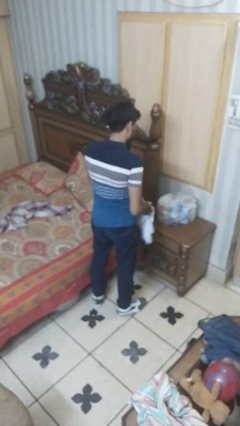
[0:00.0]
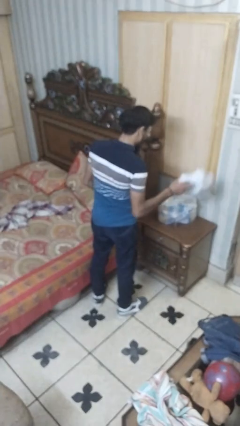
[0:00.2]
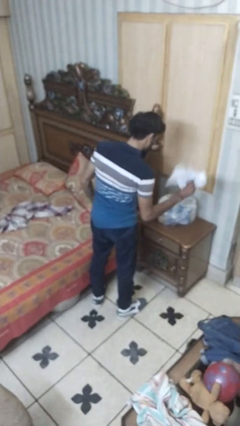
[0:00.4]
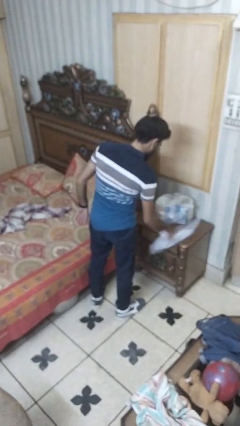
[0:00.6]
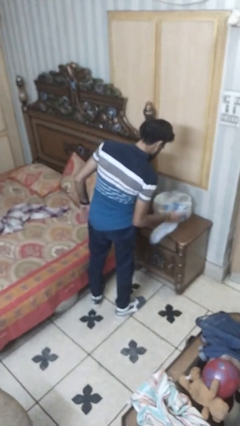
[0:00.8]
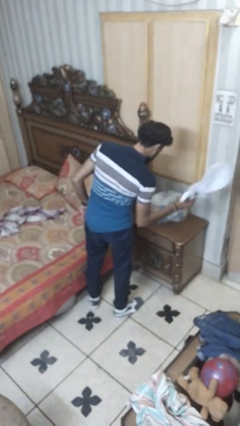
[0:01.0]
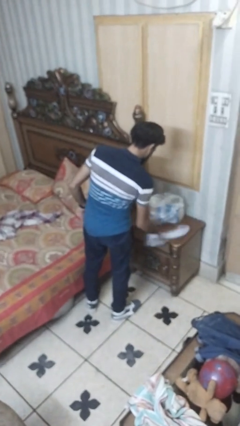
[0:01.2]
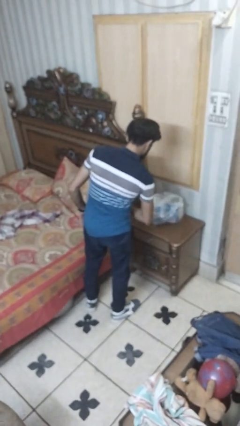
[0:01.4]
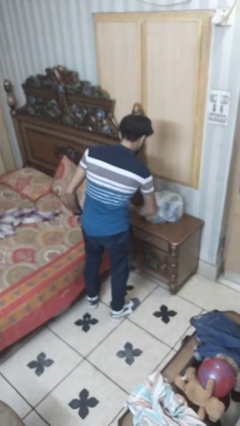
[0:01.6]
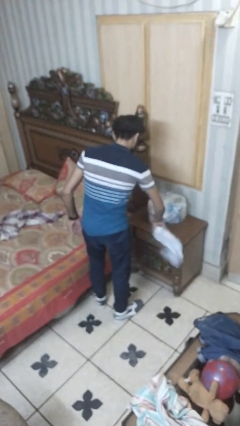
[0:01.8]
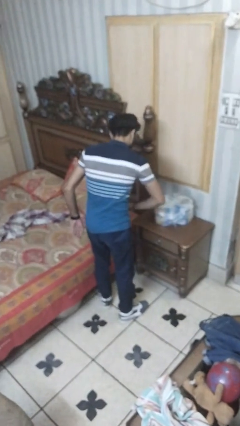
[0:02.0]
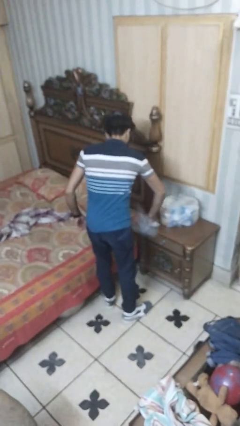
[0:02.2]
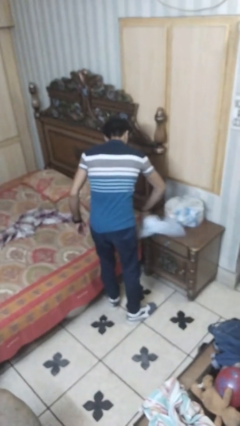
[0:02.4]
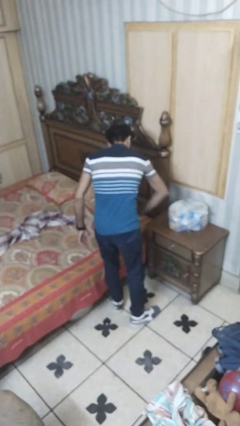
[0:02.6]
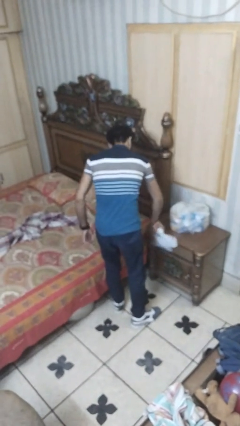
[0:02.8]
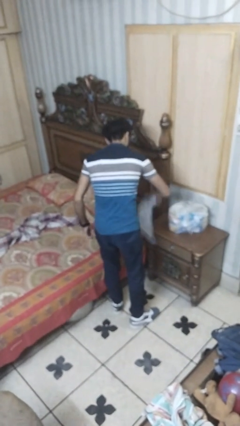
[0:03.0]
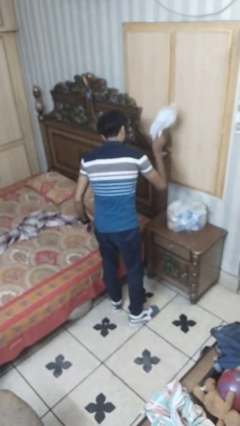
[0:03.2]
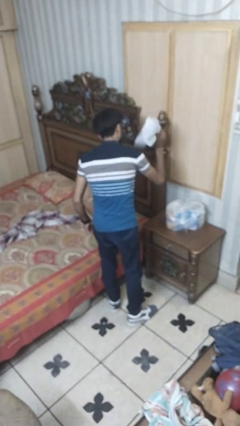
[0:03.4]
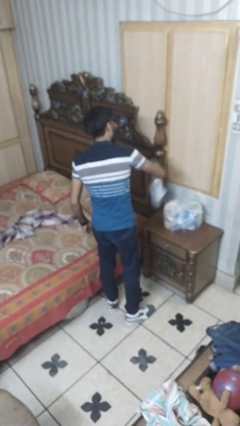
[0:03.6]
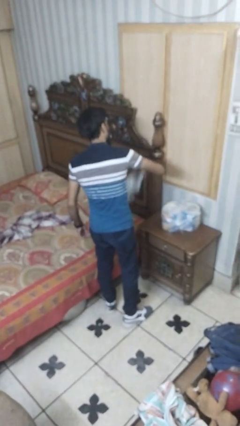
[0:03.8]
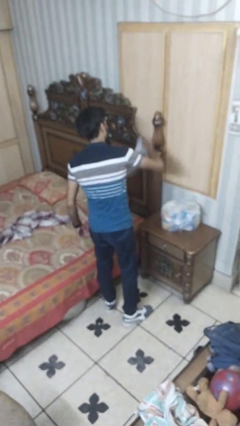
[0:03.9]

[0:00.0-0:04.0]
person dusts furniture

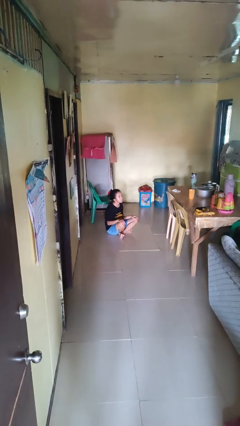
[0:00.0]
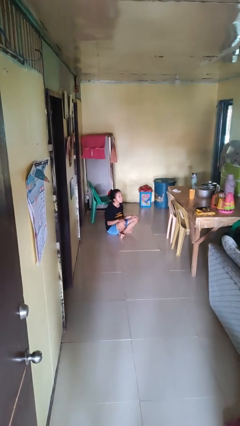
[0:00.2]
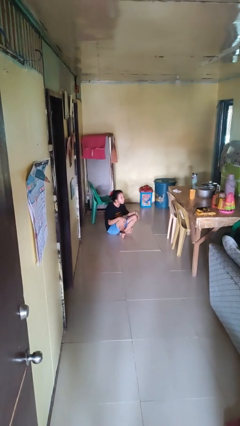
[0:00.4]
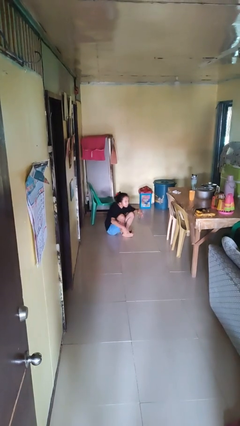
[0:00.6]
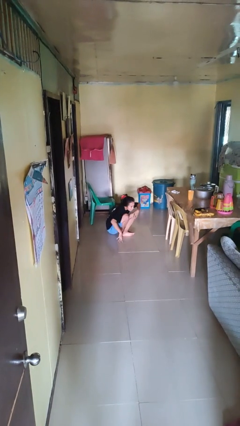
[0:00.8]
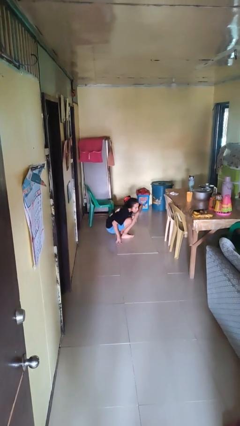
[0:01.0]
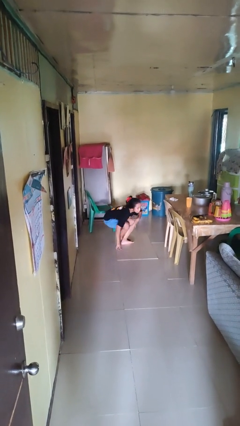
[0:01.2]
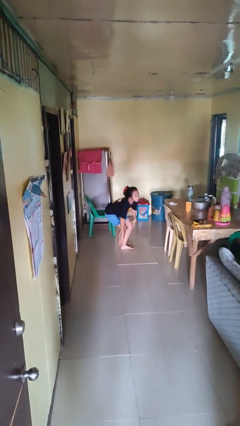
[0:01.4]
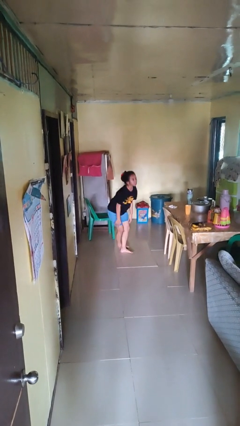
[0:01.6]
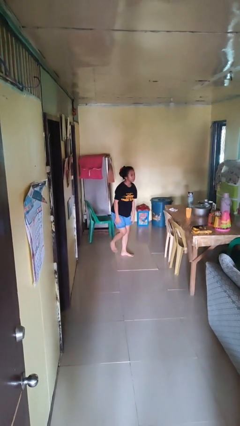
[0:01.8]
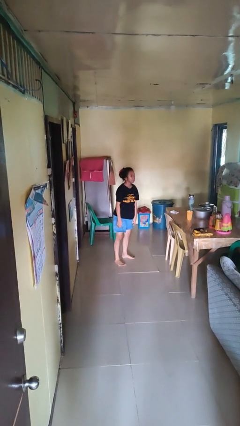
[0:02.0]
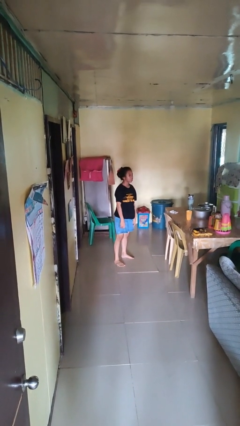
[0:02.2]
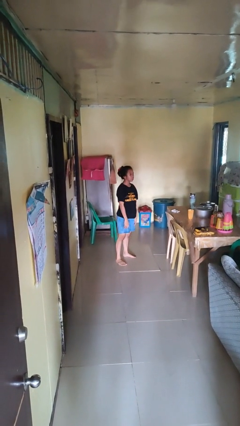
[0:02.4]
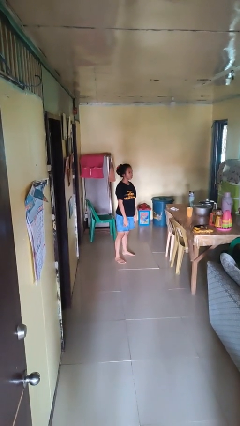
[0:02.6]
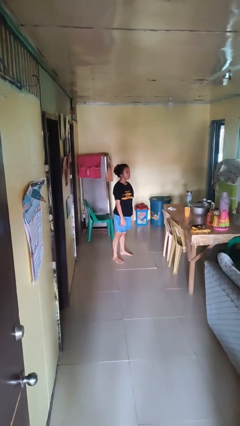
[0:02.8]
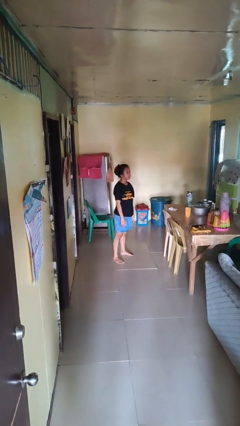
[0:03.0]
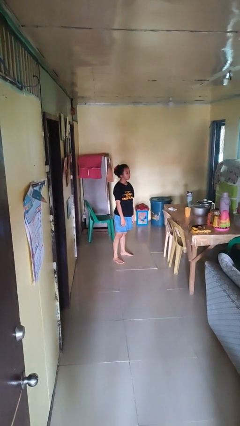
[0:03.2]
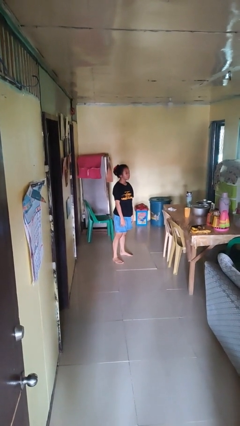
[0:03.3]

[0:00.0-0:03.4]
person stands up from floor

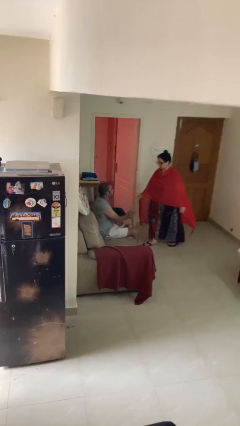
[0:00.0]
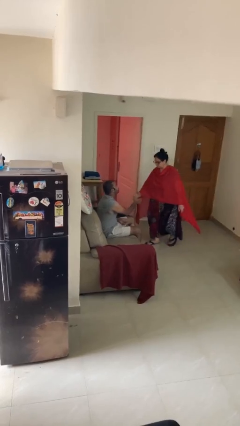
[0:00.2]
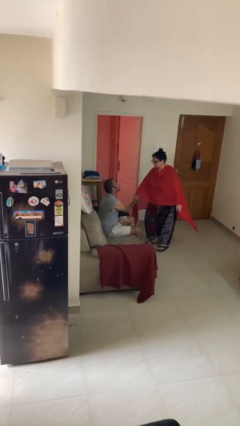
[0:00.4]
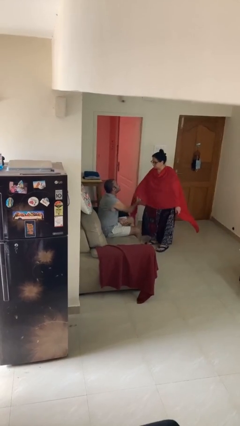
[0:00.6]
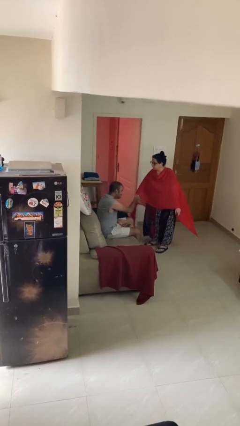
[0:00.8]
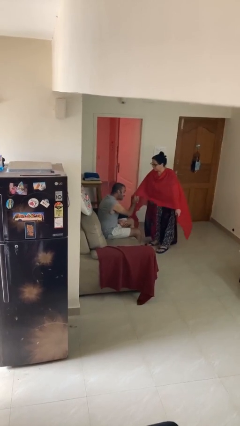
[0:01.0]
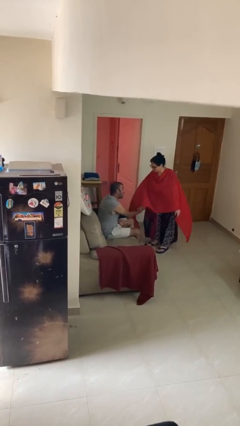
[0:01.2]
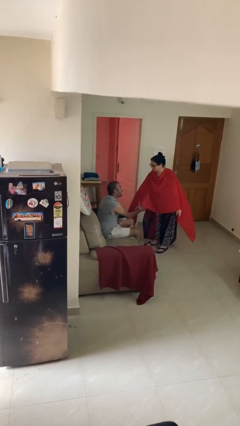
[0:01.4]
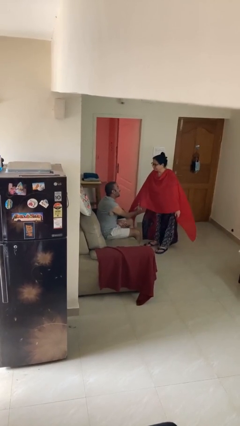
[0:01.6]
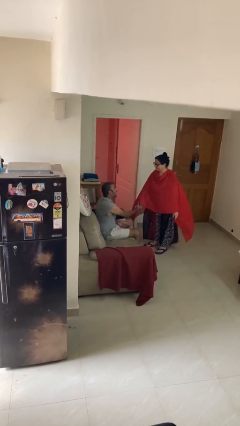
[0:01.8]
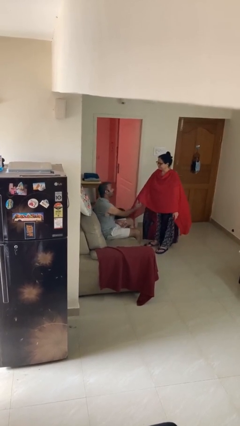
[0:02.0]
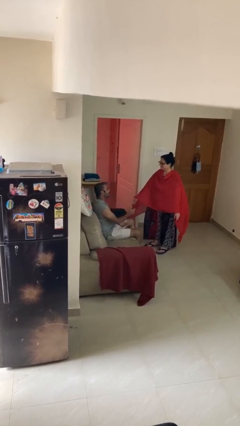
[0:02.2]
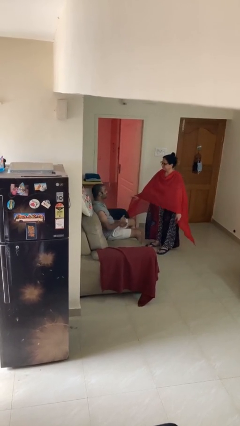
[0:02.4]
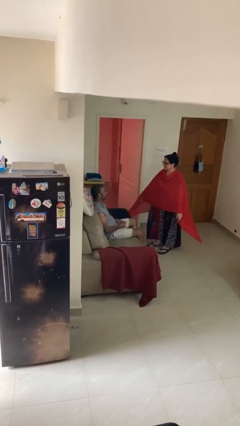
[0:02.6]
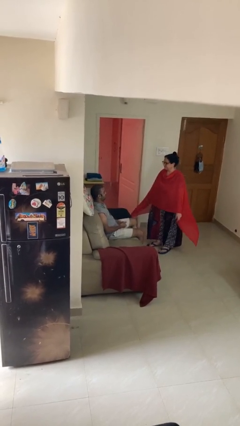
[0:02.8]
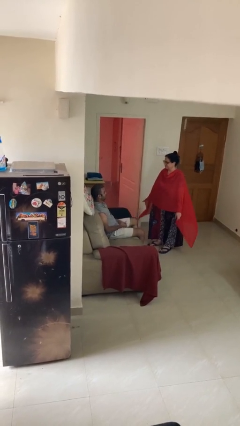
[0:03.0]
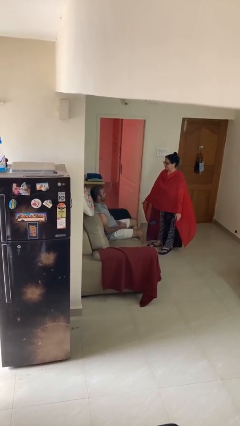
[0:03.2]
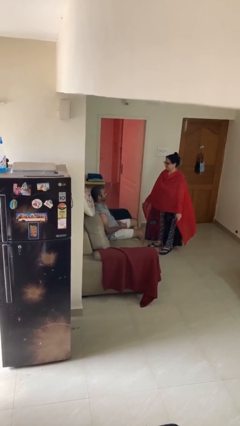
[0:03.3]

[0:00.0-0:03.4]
person shakes hand

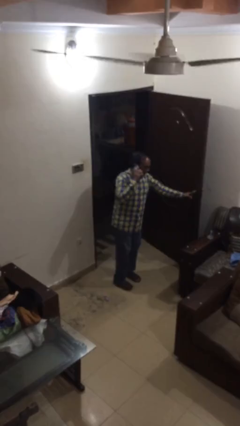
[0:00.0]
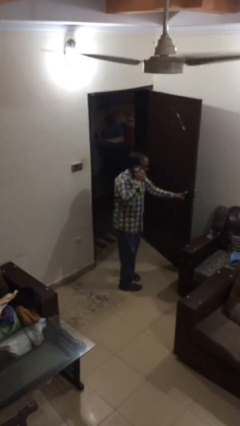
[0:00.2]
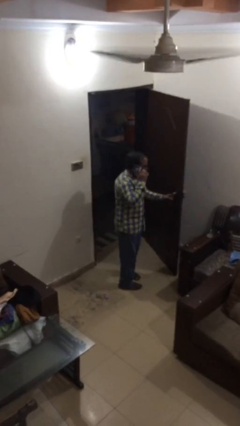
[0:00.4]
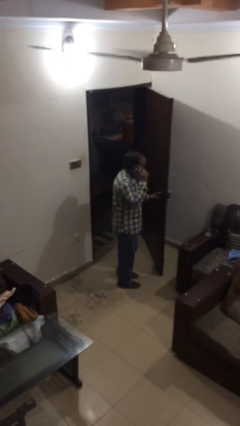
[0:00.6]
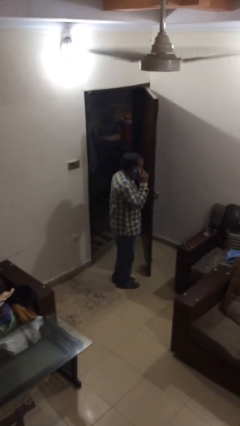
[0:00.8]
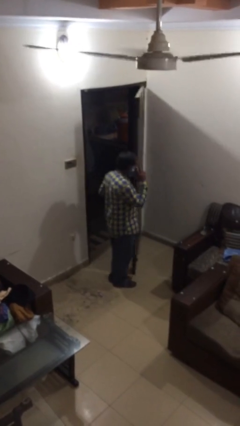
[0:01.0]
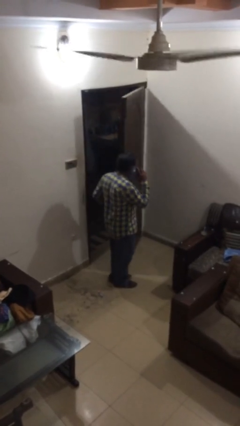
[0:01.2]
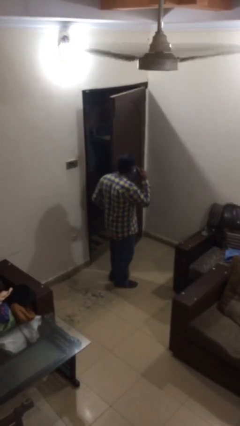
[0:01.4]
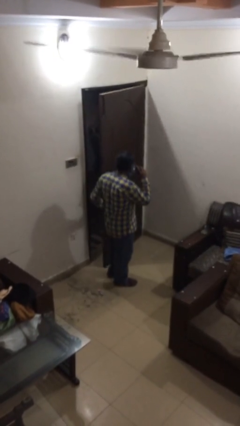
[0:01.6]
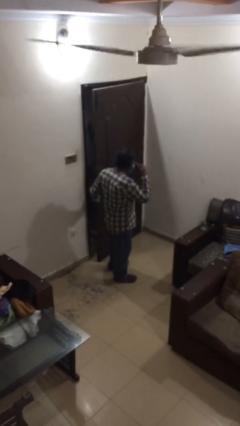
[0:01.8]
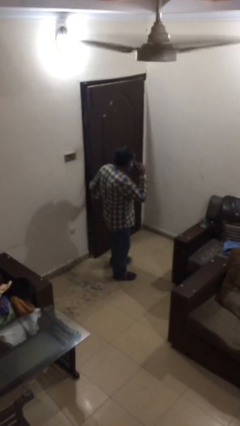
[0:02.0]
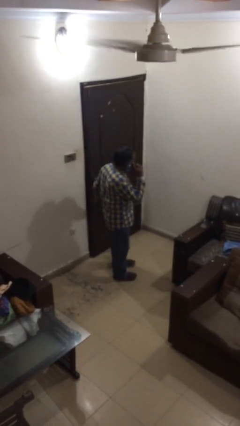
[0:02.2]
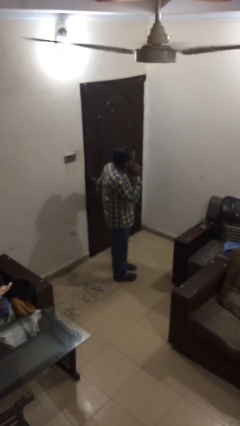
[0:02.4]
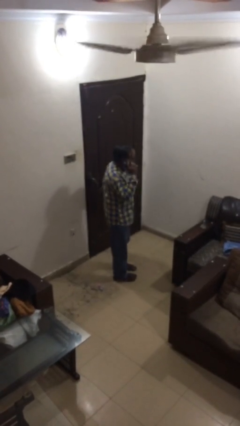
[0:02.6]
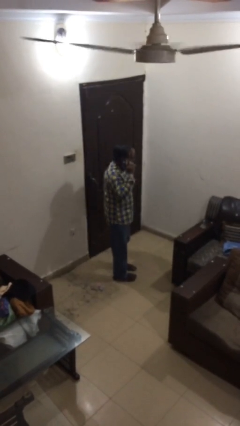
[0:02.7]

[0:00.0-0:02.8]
person closes facility door

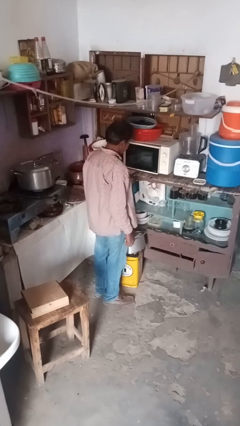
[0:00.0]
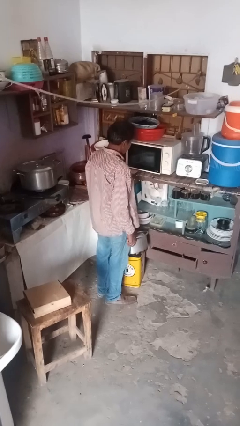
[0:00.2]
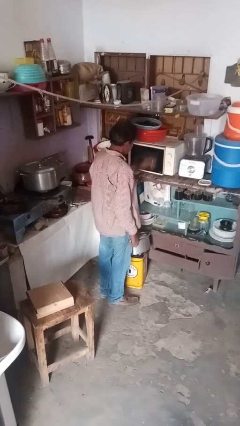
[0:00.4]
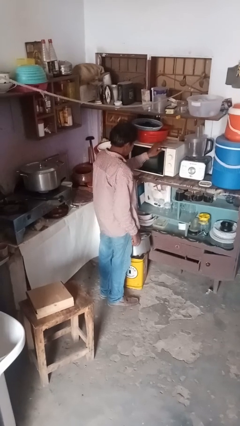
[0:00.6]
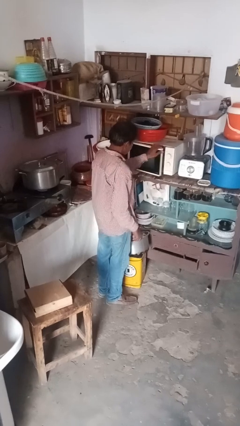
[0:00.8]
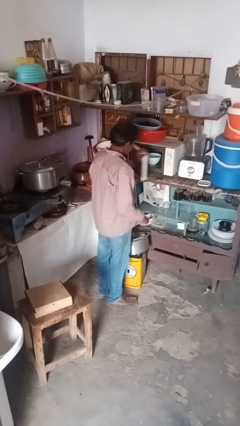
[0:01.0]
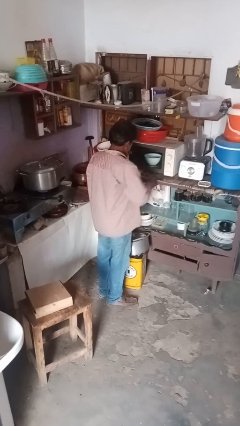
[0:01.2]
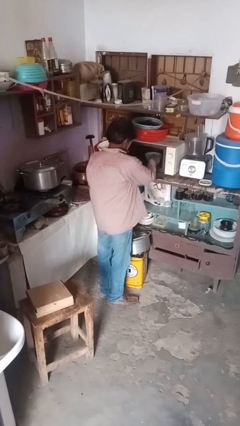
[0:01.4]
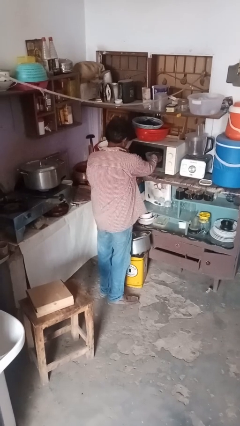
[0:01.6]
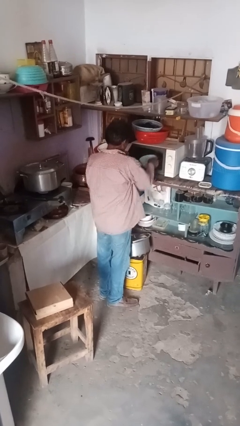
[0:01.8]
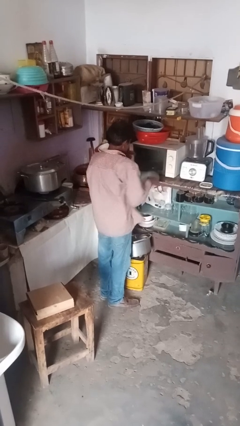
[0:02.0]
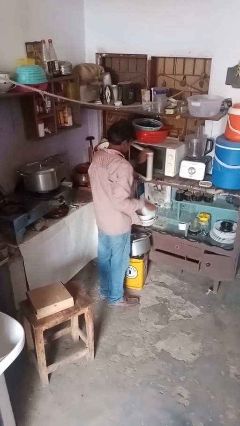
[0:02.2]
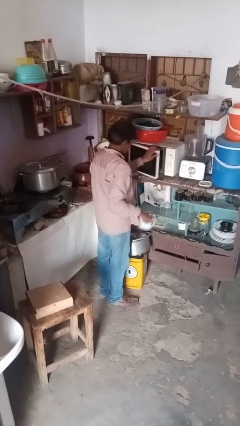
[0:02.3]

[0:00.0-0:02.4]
person takes object from microwave

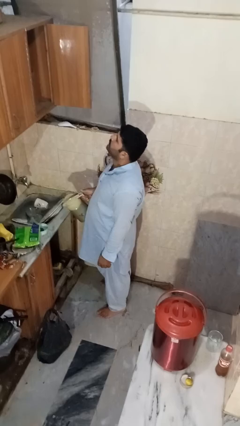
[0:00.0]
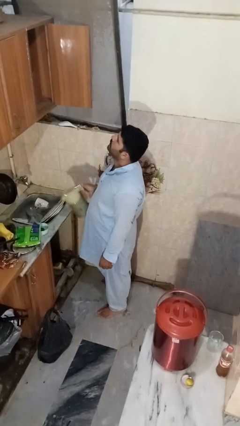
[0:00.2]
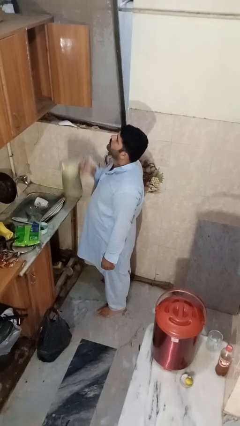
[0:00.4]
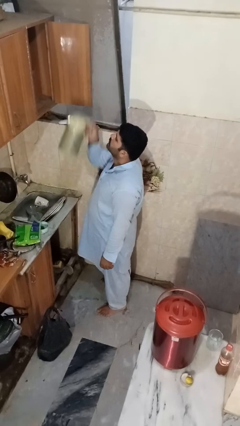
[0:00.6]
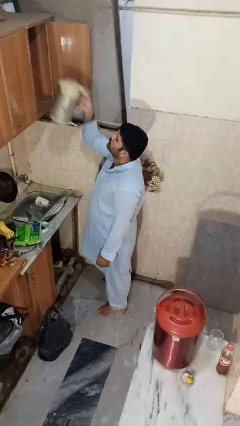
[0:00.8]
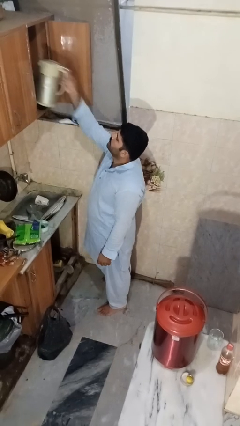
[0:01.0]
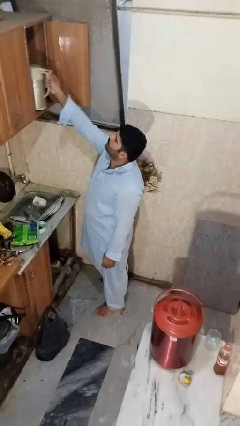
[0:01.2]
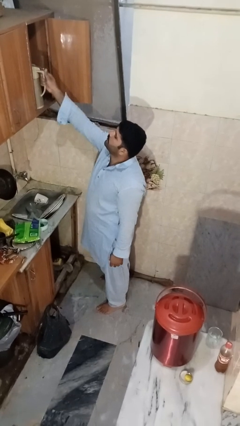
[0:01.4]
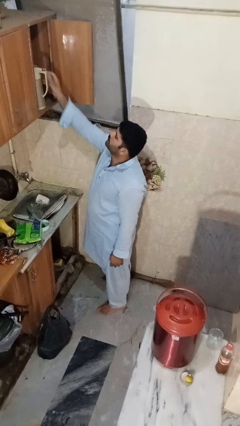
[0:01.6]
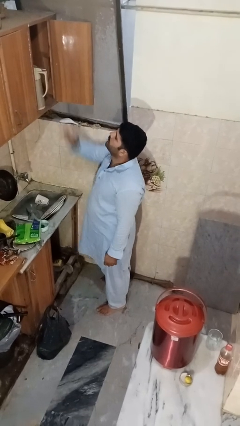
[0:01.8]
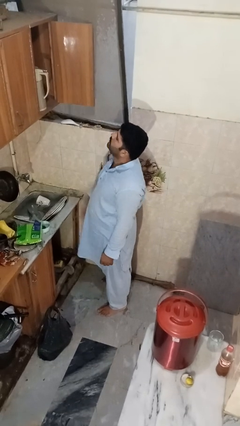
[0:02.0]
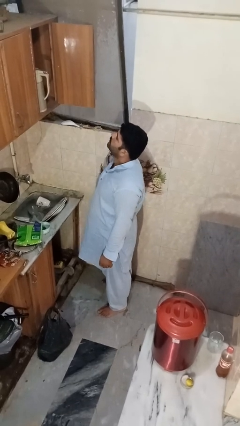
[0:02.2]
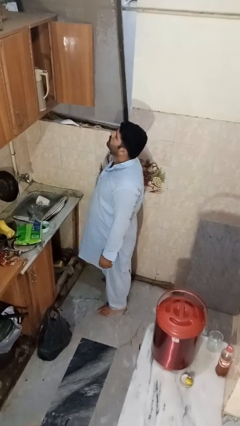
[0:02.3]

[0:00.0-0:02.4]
person puts object in cabinet
